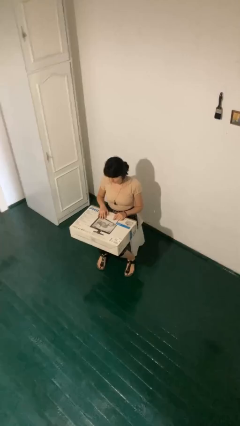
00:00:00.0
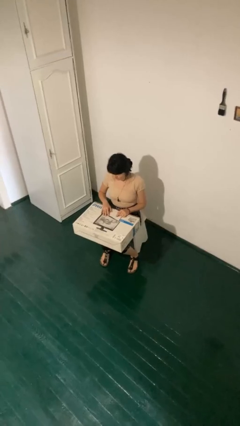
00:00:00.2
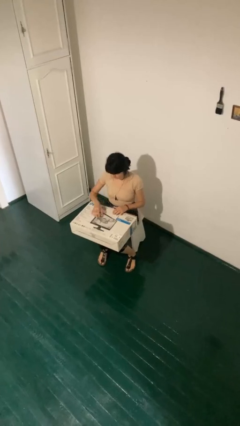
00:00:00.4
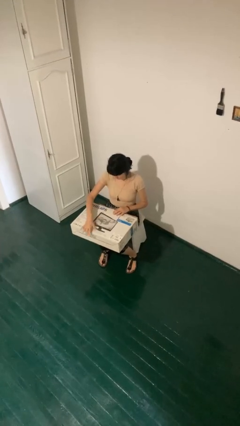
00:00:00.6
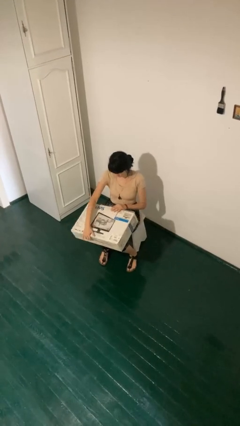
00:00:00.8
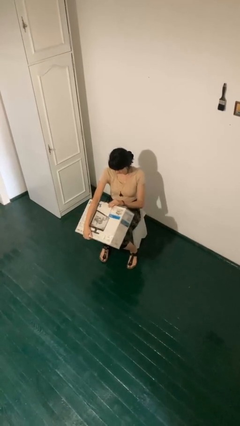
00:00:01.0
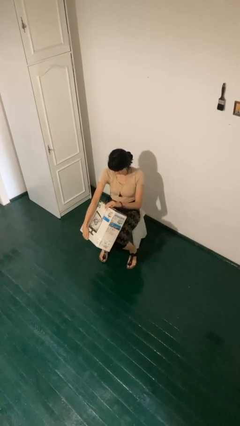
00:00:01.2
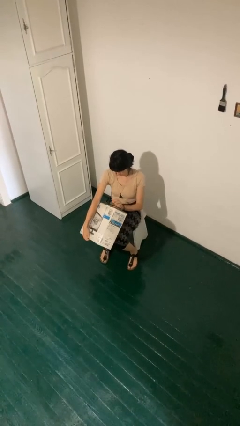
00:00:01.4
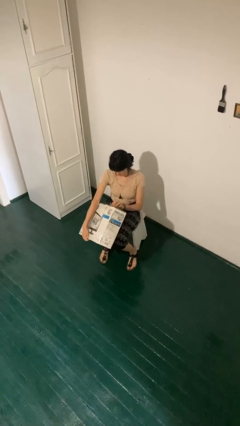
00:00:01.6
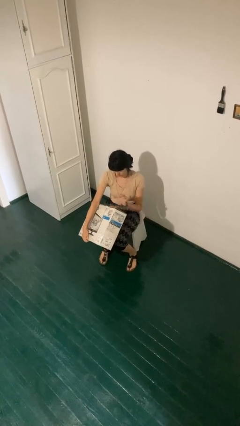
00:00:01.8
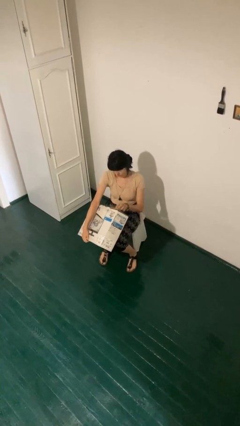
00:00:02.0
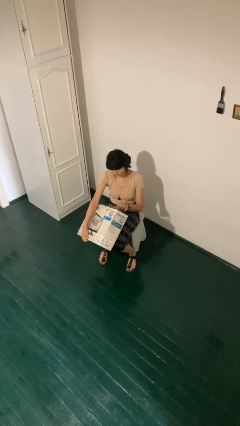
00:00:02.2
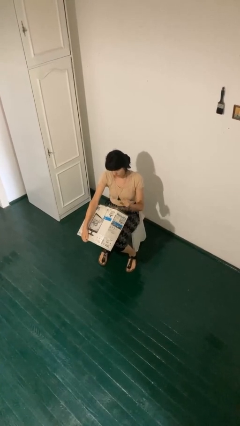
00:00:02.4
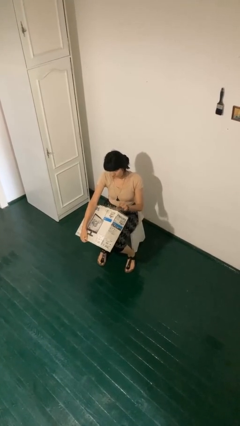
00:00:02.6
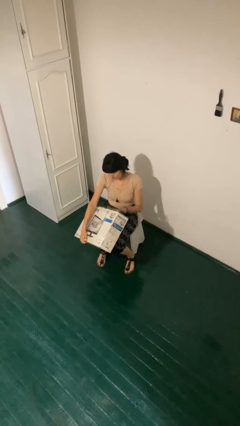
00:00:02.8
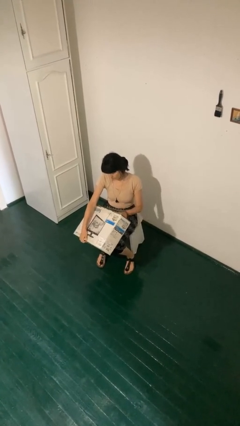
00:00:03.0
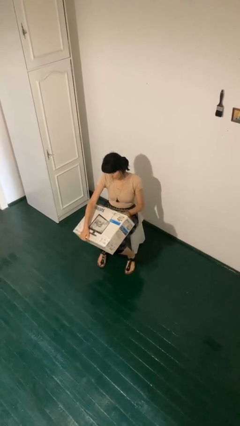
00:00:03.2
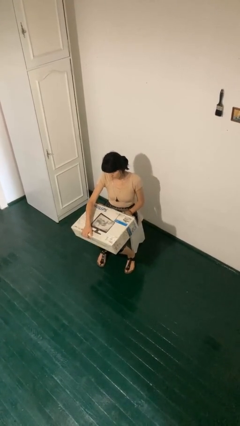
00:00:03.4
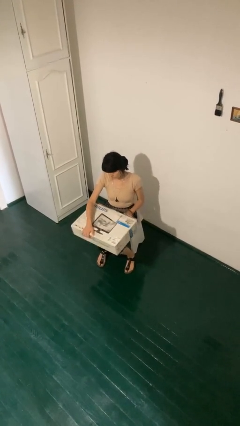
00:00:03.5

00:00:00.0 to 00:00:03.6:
person taps object with finger

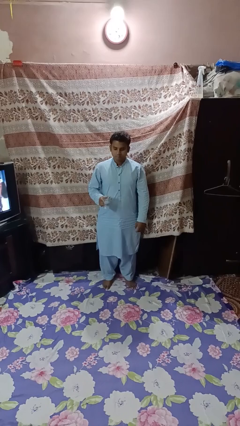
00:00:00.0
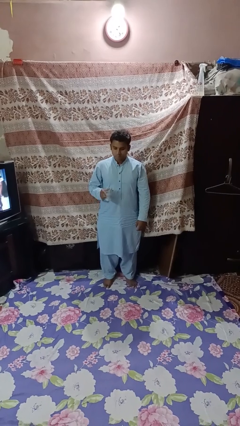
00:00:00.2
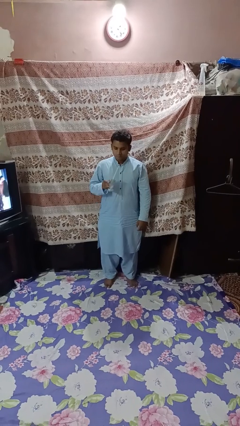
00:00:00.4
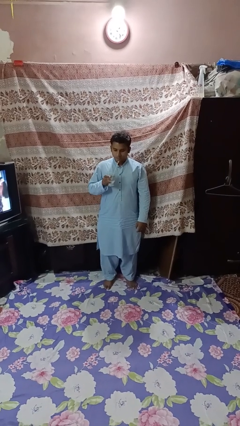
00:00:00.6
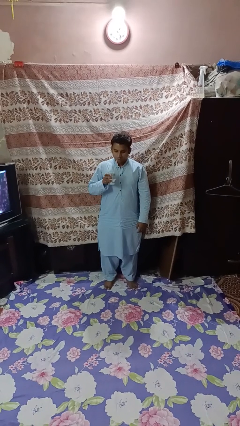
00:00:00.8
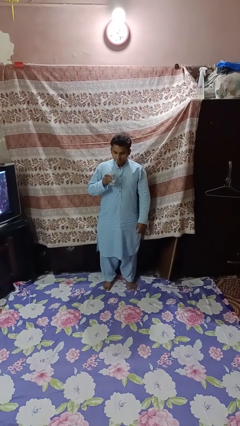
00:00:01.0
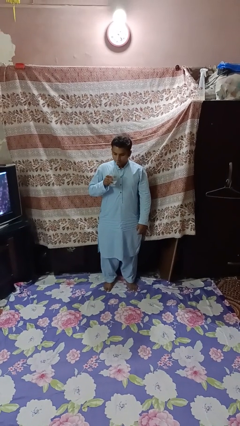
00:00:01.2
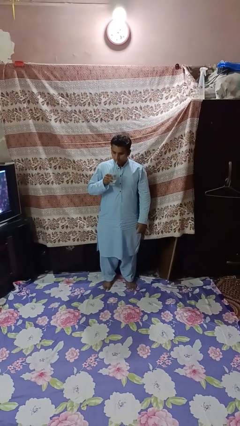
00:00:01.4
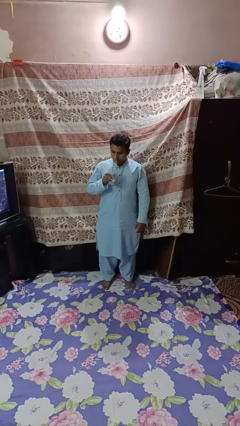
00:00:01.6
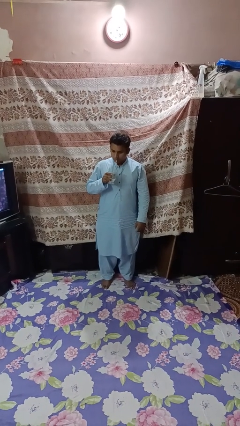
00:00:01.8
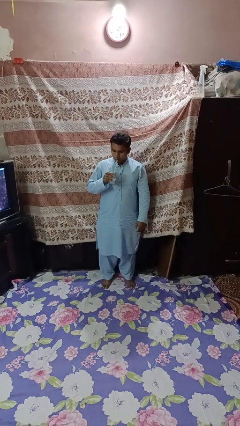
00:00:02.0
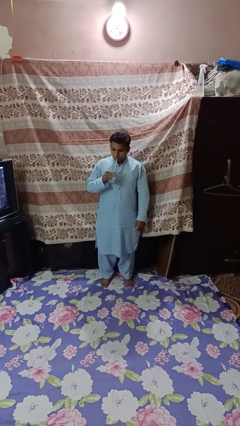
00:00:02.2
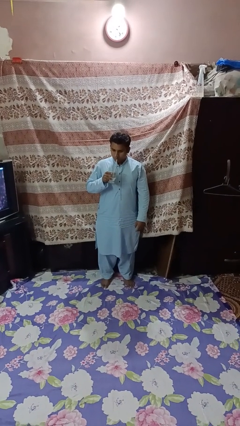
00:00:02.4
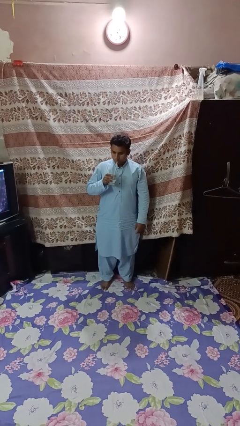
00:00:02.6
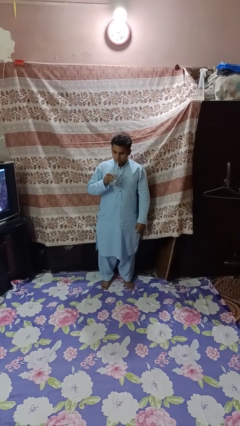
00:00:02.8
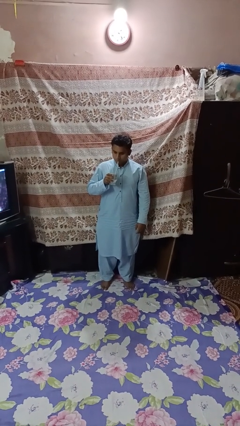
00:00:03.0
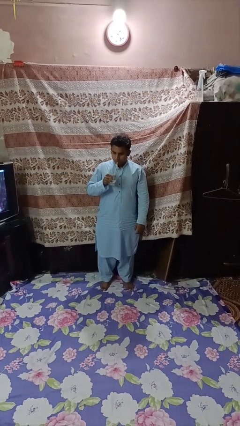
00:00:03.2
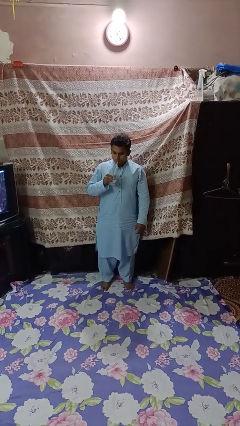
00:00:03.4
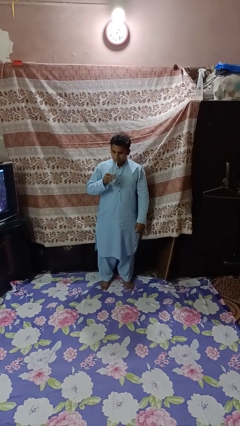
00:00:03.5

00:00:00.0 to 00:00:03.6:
person drinks from straw

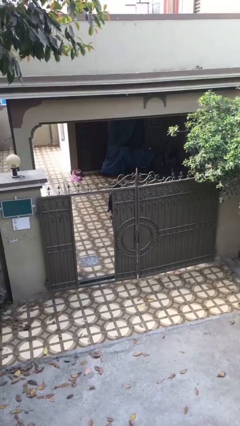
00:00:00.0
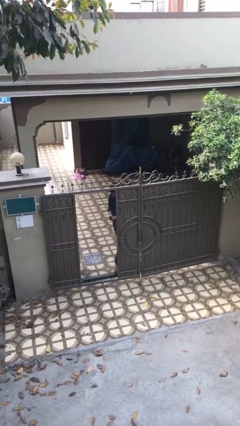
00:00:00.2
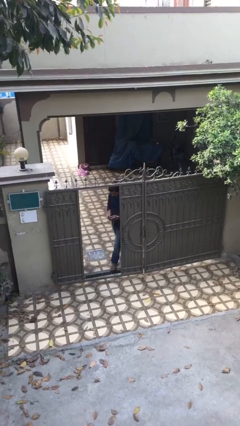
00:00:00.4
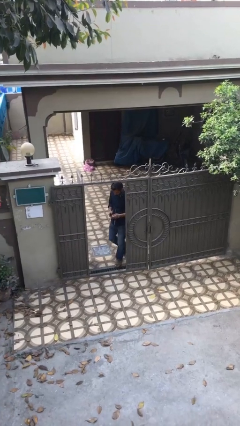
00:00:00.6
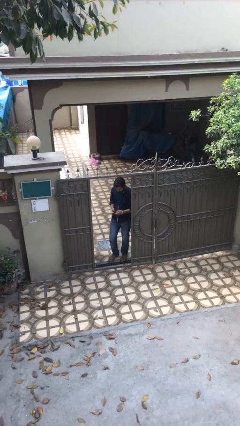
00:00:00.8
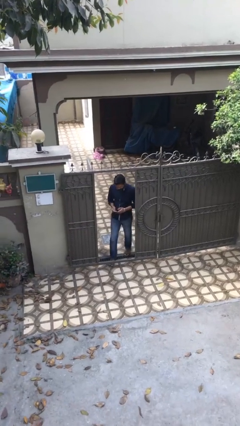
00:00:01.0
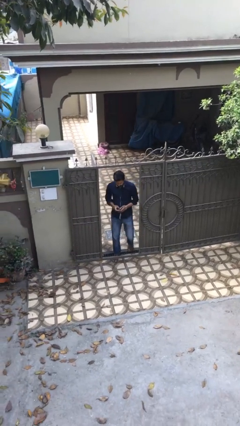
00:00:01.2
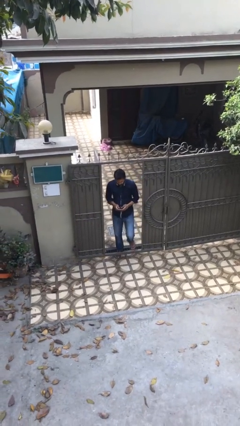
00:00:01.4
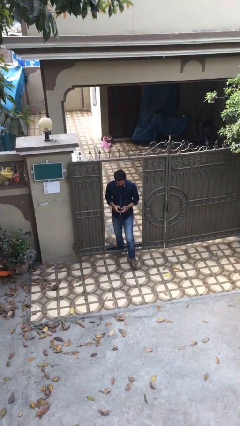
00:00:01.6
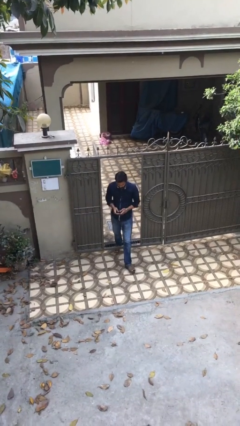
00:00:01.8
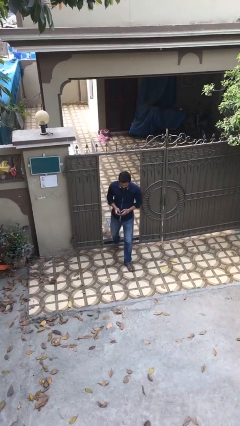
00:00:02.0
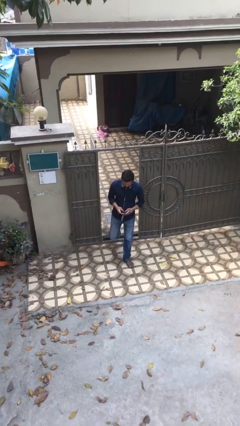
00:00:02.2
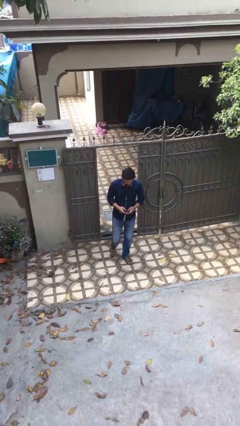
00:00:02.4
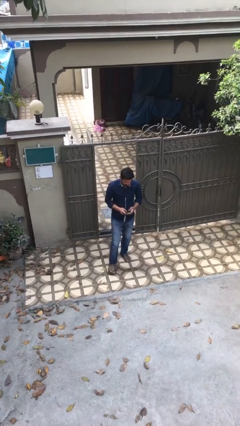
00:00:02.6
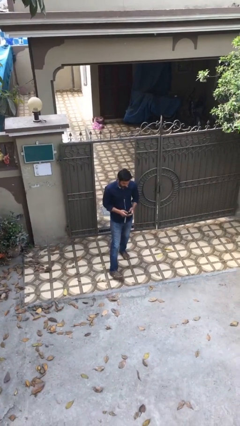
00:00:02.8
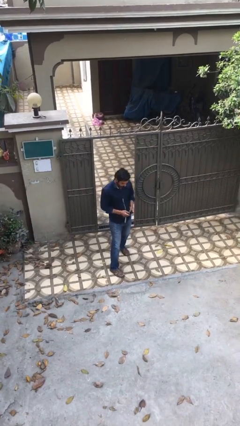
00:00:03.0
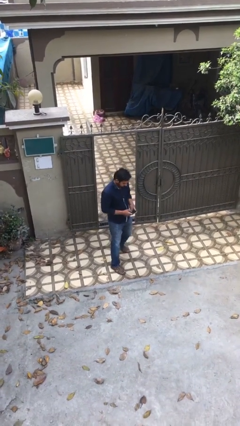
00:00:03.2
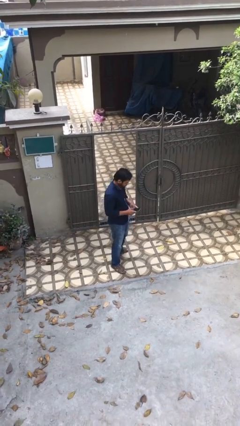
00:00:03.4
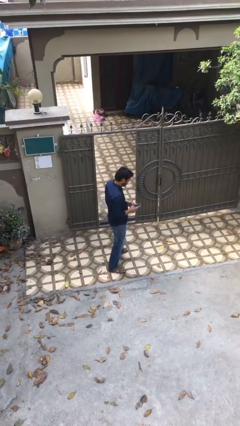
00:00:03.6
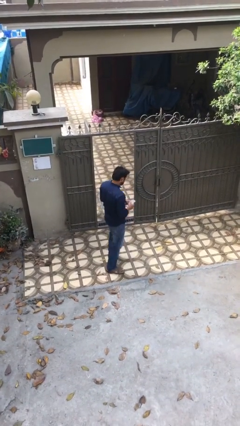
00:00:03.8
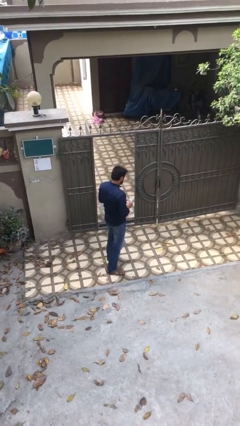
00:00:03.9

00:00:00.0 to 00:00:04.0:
person enters scene through structure

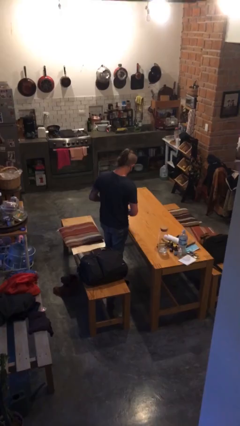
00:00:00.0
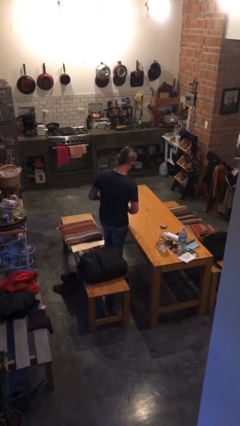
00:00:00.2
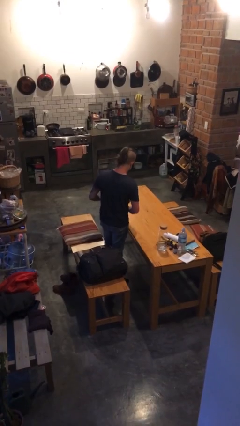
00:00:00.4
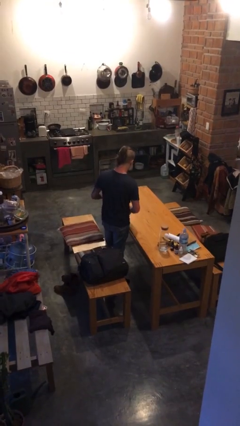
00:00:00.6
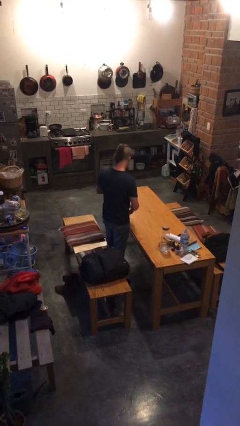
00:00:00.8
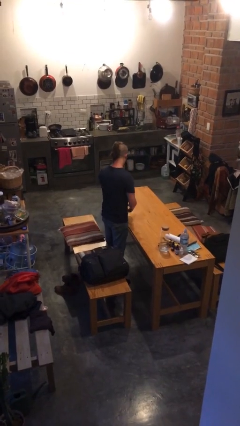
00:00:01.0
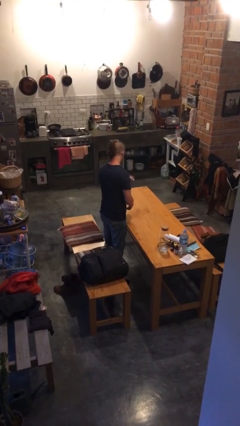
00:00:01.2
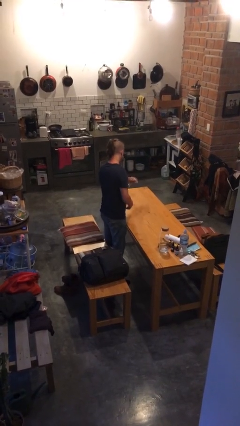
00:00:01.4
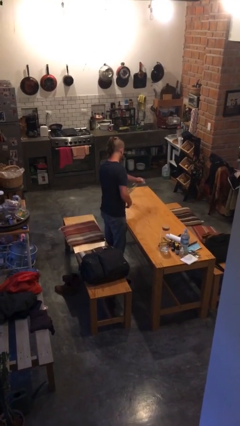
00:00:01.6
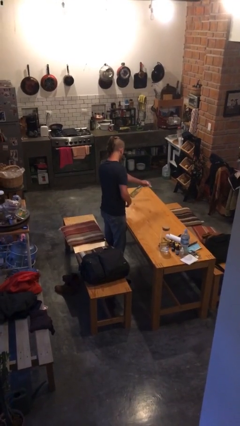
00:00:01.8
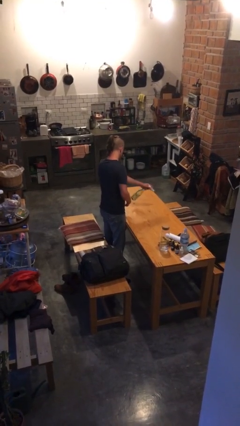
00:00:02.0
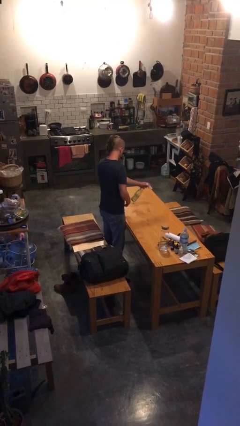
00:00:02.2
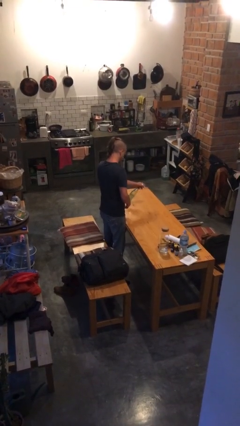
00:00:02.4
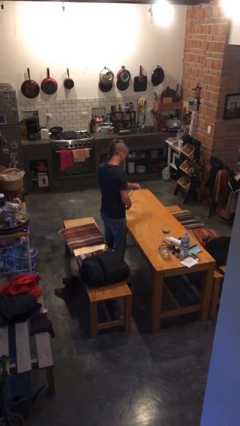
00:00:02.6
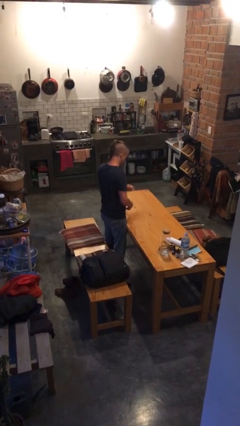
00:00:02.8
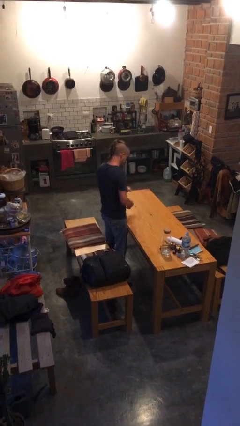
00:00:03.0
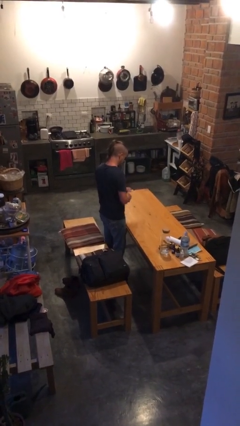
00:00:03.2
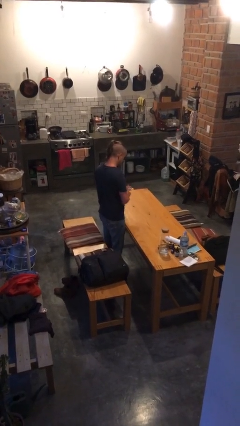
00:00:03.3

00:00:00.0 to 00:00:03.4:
person sprays from bottle

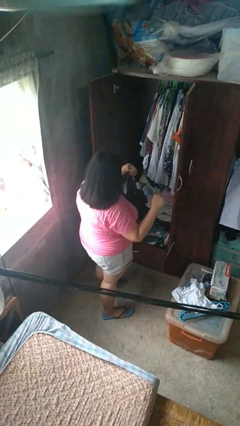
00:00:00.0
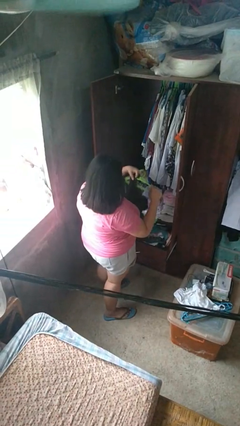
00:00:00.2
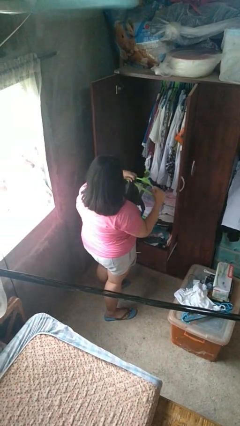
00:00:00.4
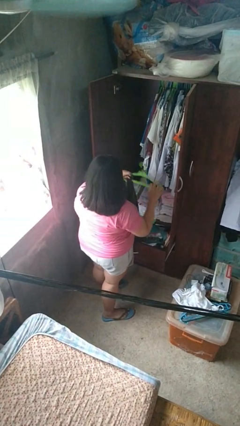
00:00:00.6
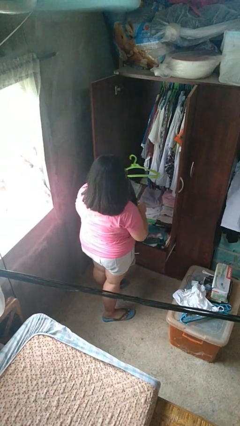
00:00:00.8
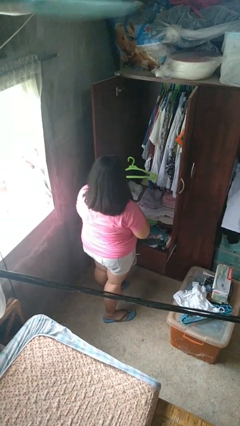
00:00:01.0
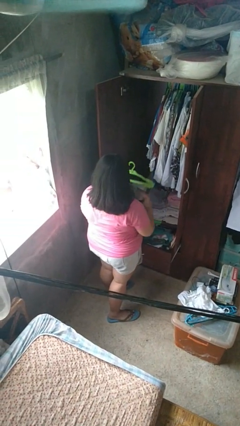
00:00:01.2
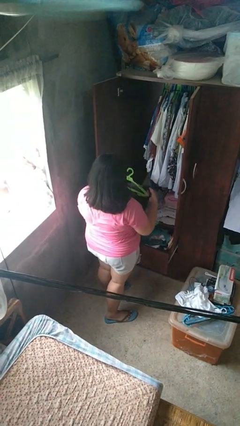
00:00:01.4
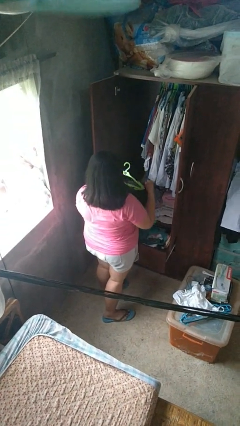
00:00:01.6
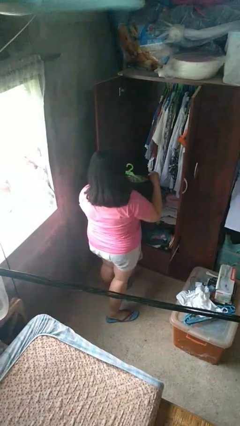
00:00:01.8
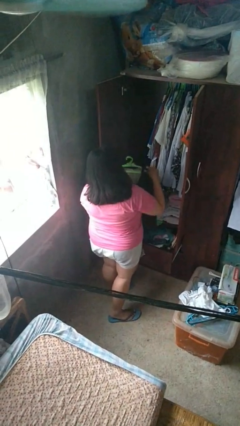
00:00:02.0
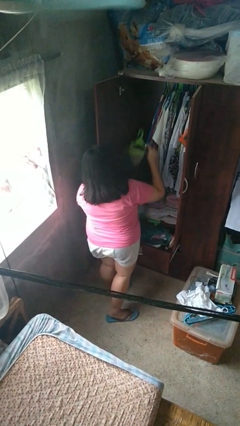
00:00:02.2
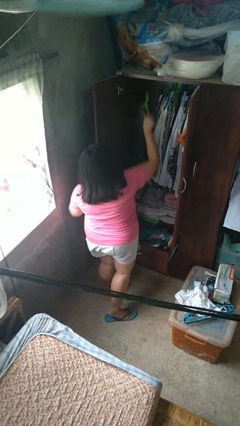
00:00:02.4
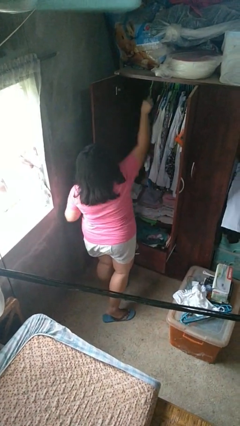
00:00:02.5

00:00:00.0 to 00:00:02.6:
person puts clothes into closet

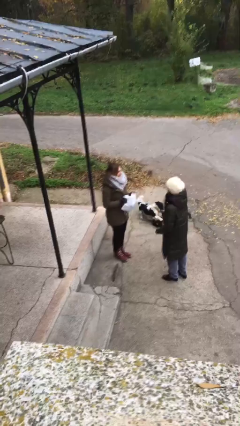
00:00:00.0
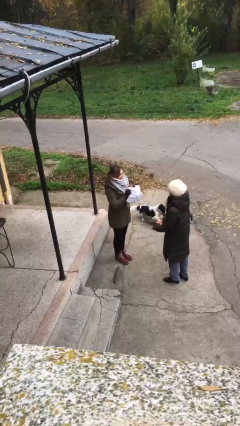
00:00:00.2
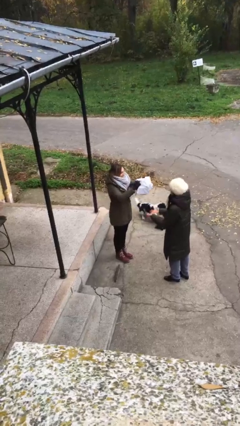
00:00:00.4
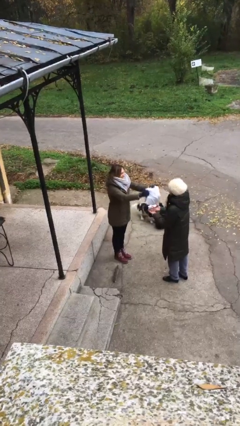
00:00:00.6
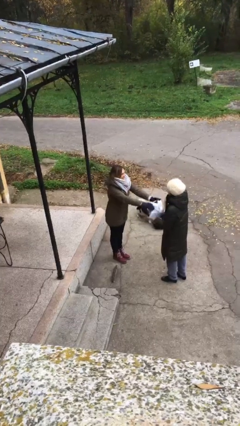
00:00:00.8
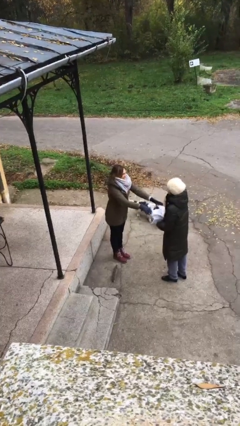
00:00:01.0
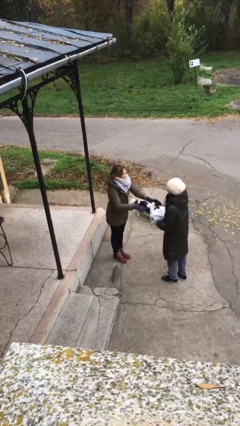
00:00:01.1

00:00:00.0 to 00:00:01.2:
person transfers object to person
